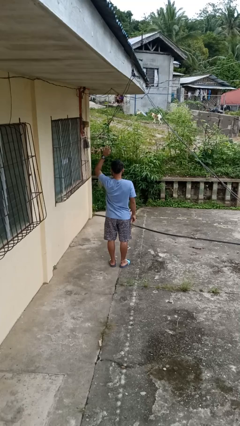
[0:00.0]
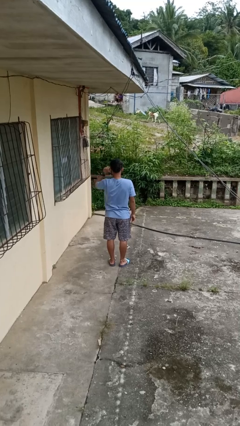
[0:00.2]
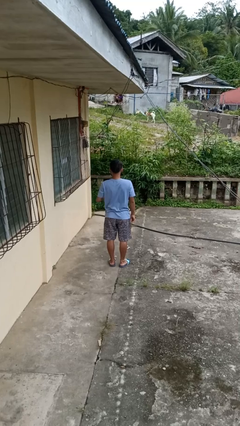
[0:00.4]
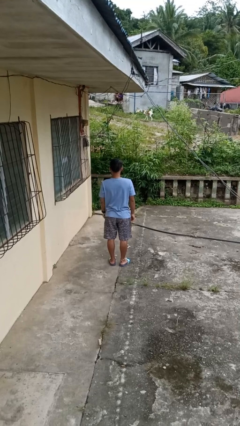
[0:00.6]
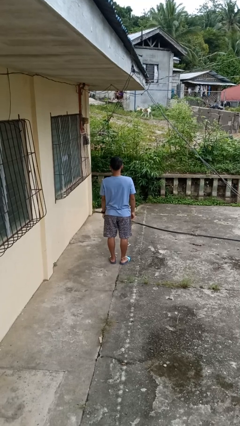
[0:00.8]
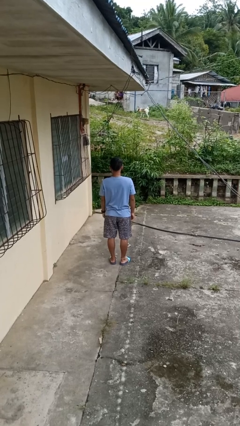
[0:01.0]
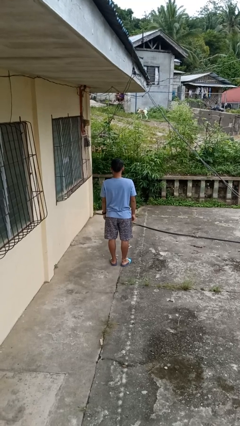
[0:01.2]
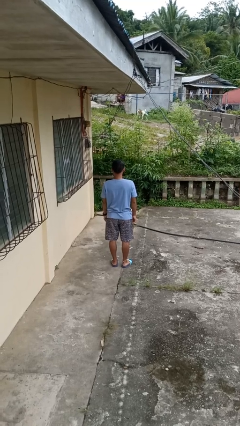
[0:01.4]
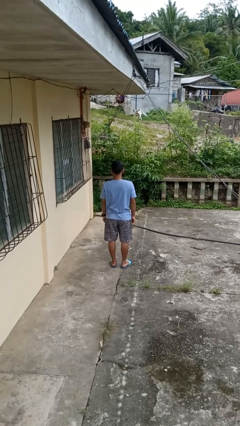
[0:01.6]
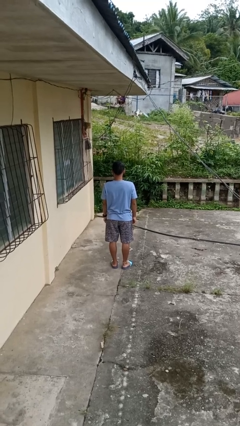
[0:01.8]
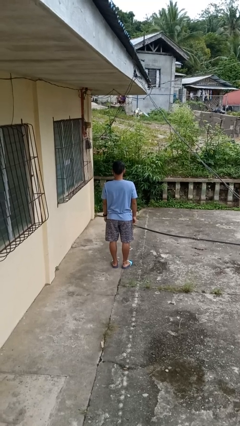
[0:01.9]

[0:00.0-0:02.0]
person gestures lower hand

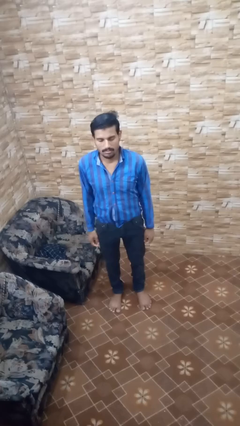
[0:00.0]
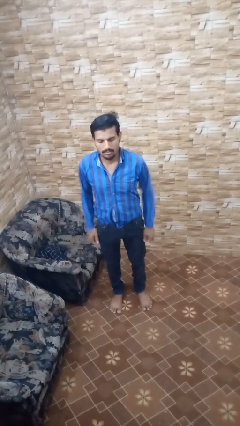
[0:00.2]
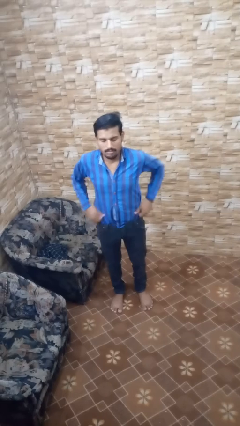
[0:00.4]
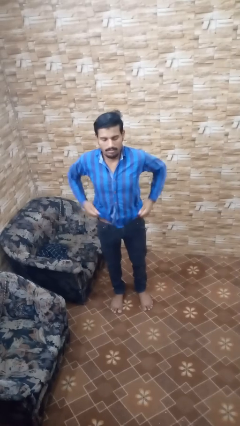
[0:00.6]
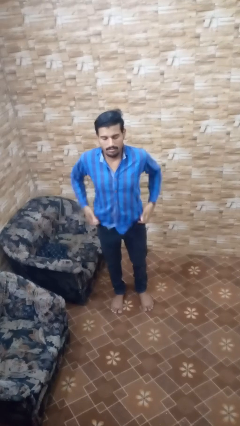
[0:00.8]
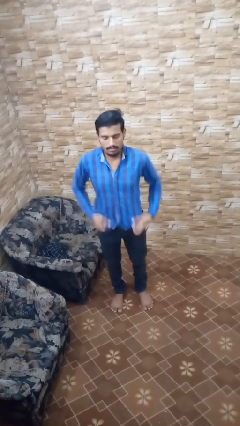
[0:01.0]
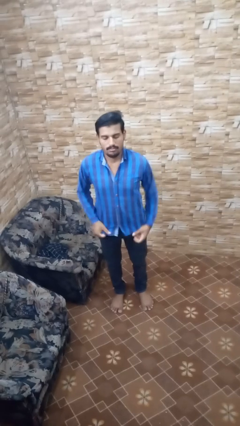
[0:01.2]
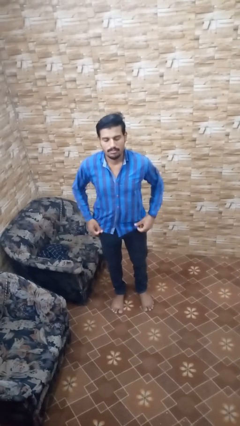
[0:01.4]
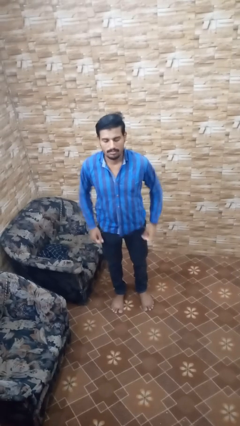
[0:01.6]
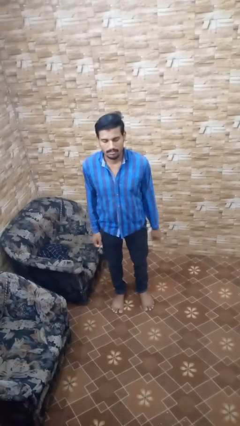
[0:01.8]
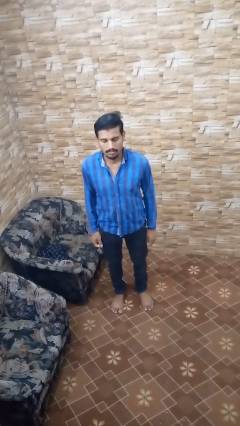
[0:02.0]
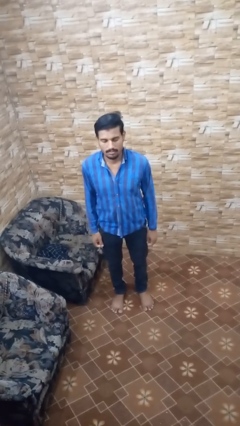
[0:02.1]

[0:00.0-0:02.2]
person untucks shirt

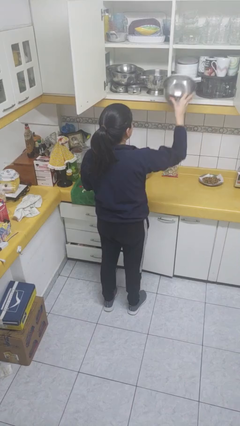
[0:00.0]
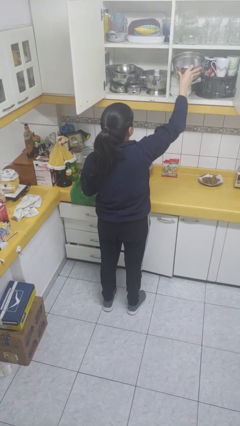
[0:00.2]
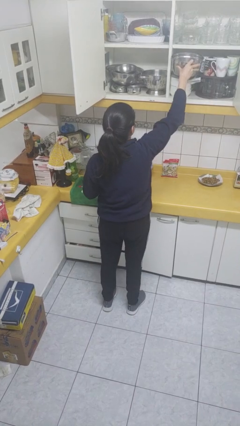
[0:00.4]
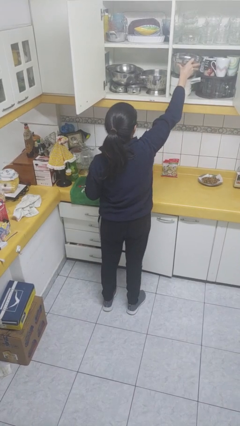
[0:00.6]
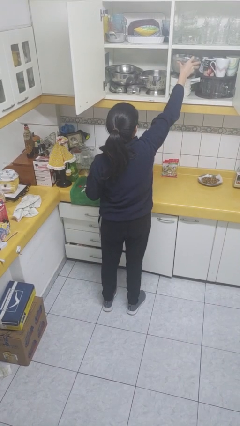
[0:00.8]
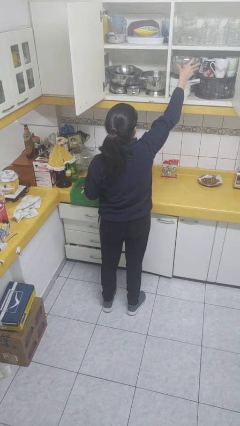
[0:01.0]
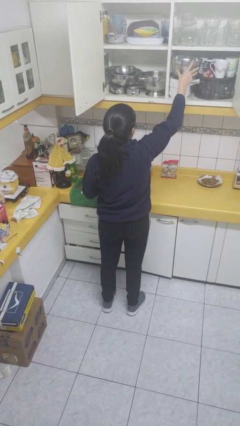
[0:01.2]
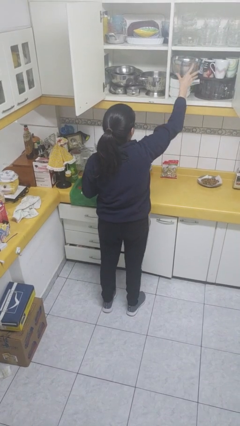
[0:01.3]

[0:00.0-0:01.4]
person puts down object into cabinet

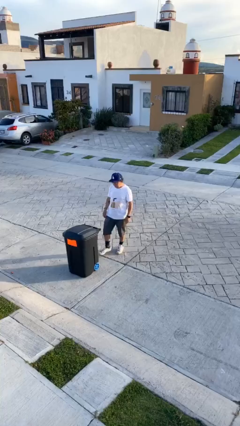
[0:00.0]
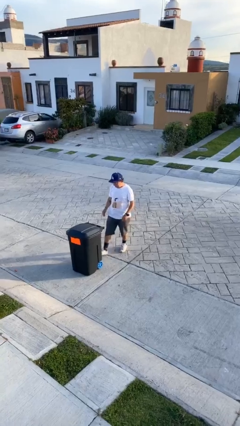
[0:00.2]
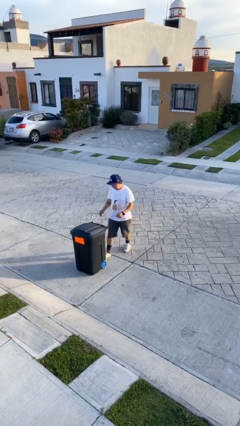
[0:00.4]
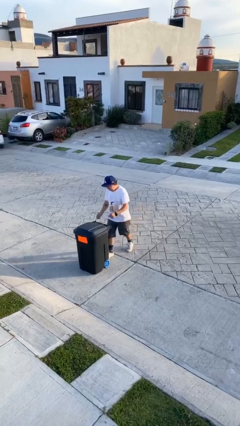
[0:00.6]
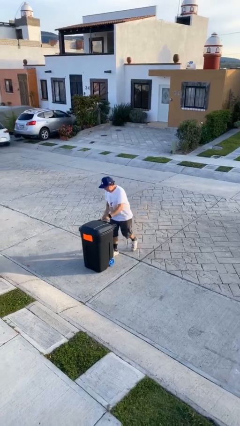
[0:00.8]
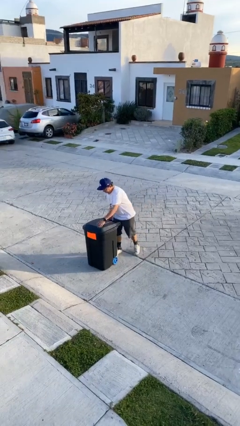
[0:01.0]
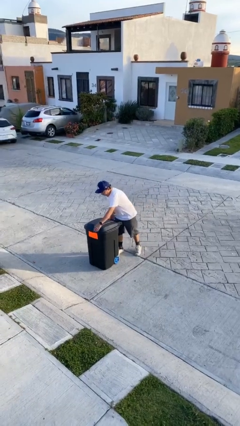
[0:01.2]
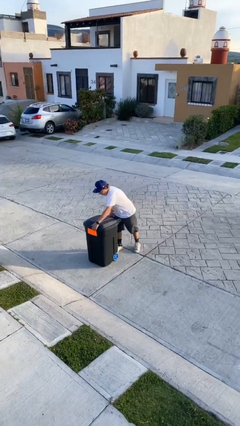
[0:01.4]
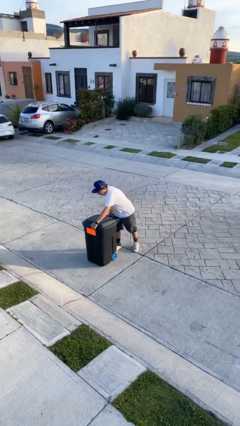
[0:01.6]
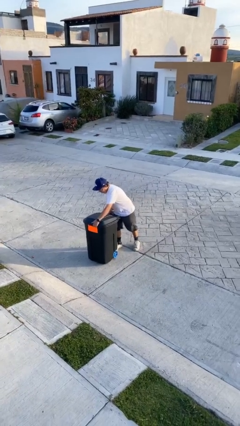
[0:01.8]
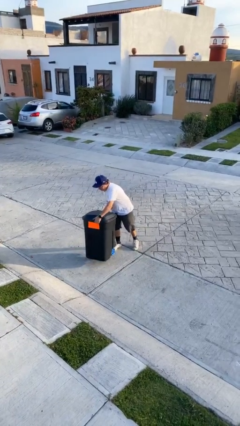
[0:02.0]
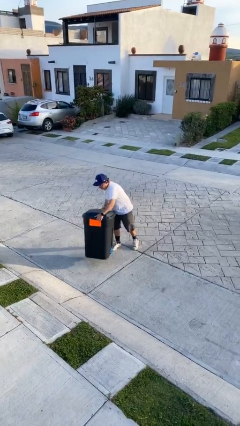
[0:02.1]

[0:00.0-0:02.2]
person picks up object from floor

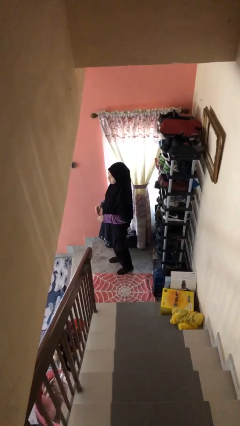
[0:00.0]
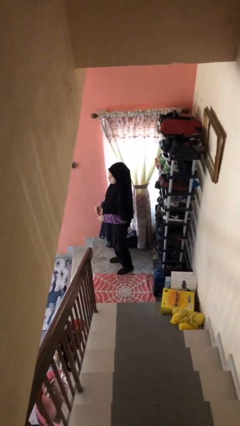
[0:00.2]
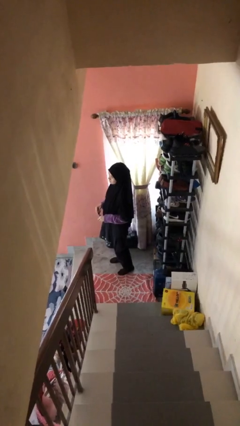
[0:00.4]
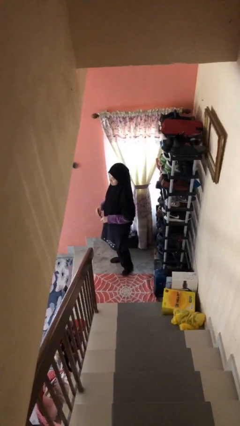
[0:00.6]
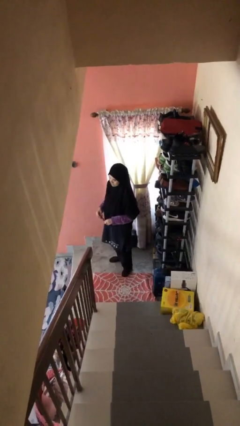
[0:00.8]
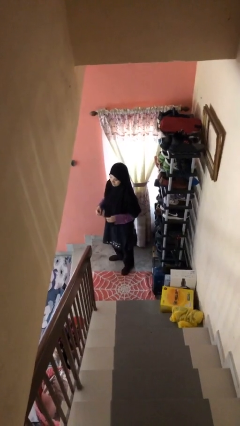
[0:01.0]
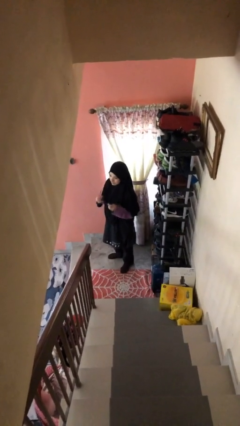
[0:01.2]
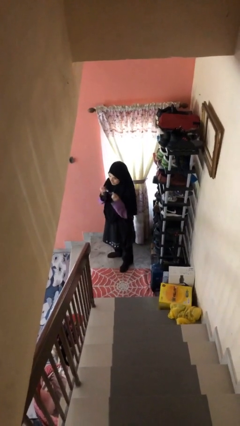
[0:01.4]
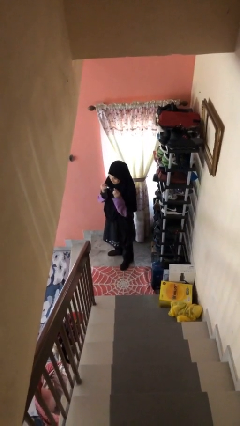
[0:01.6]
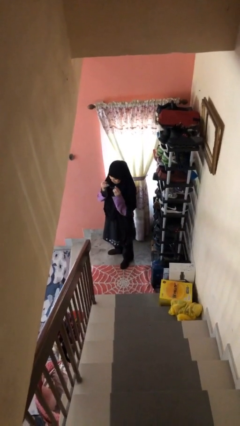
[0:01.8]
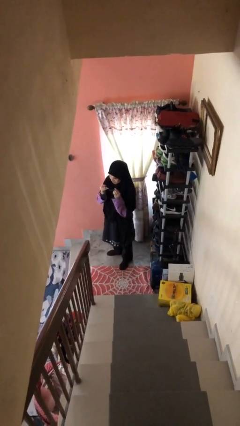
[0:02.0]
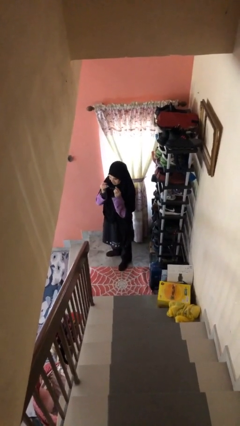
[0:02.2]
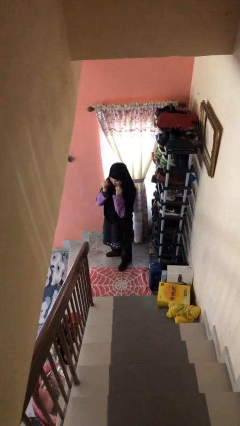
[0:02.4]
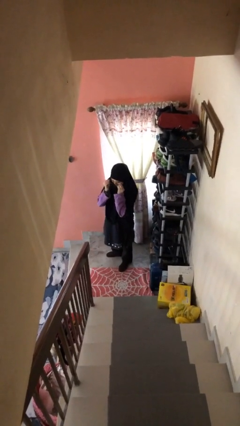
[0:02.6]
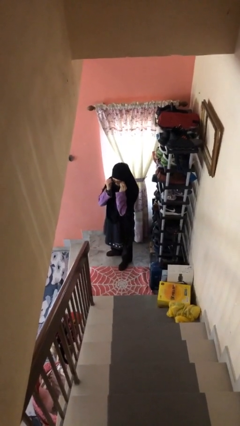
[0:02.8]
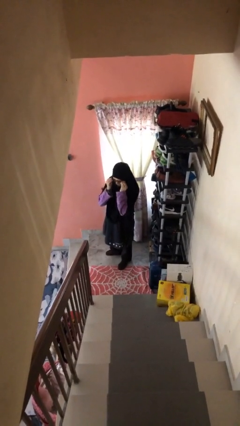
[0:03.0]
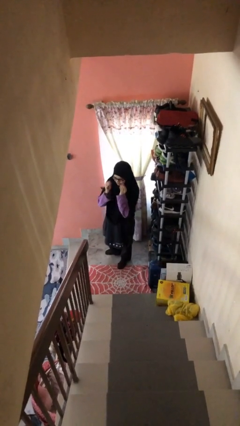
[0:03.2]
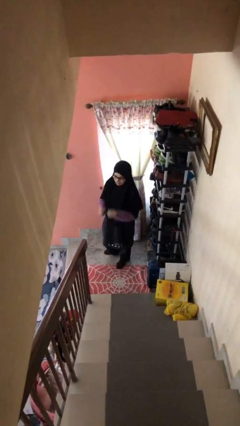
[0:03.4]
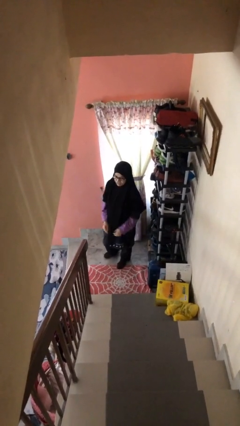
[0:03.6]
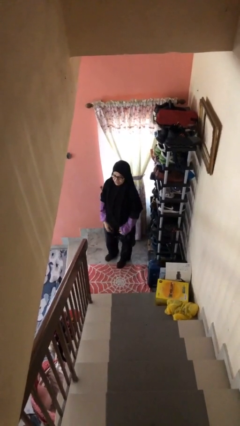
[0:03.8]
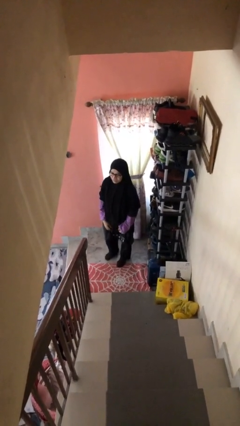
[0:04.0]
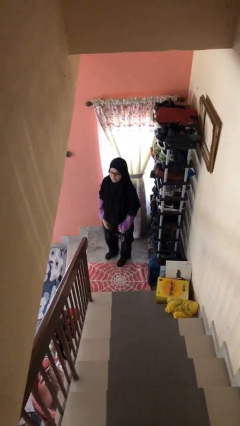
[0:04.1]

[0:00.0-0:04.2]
person puts on glasses

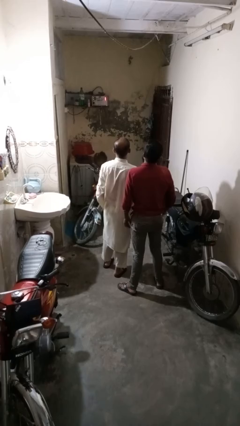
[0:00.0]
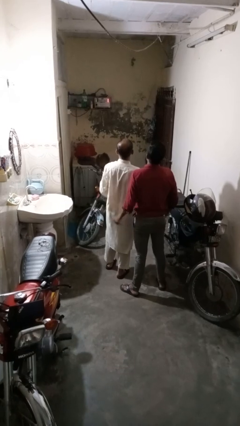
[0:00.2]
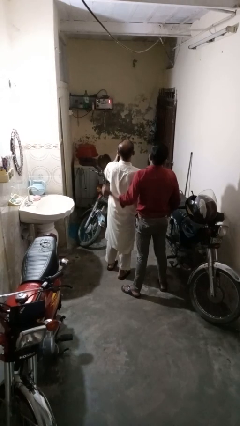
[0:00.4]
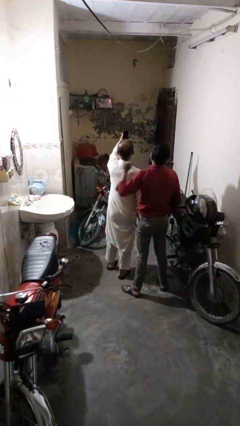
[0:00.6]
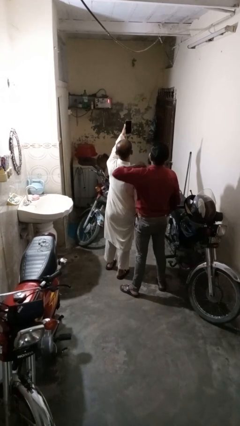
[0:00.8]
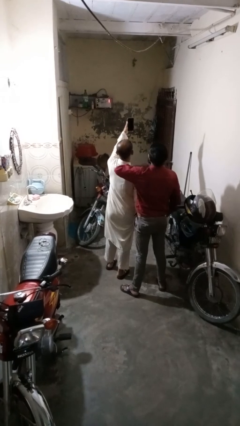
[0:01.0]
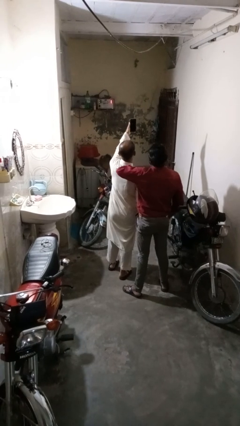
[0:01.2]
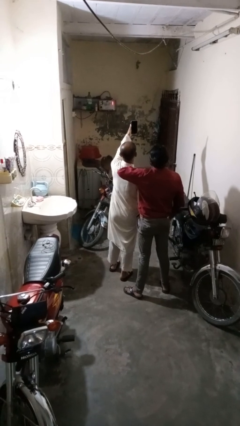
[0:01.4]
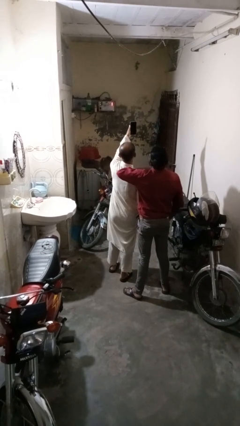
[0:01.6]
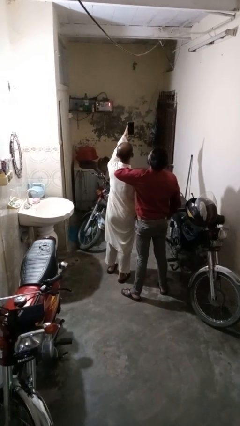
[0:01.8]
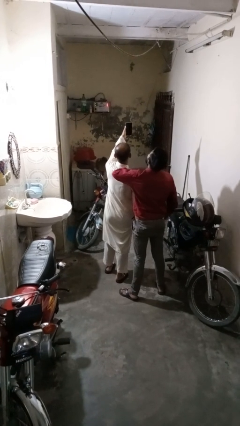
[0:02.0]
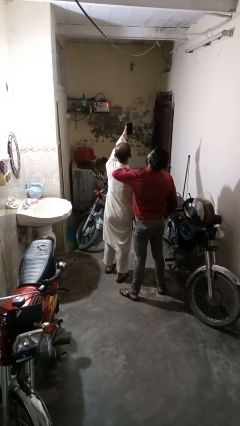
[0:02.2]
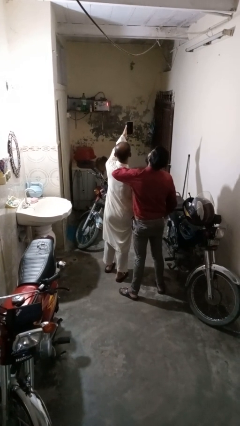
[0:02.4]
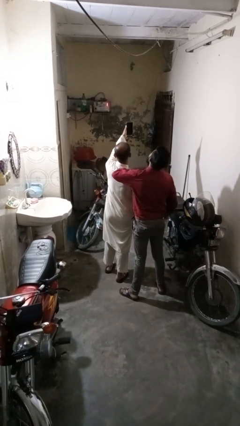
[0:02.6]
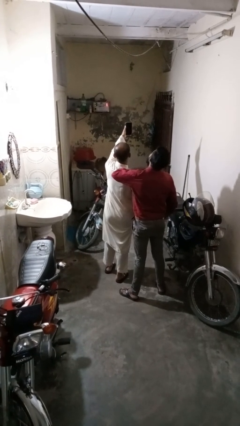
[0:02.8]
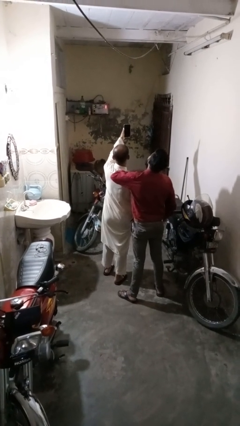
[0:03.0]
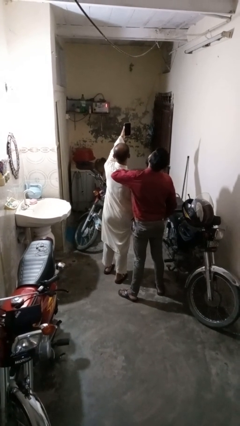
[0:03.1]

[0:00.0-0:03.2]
person takes selfie with person

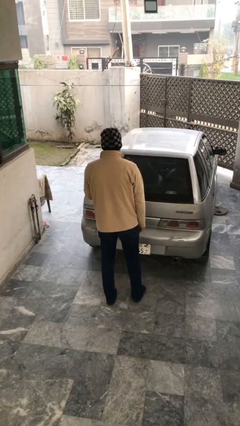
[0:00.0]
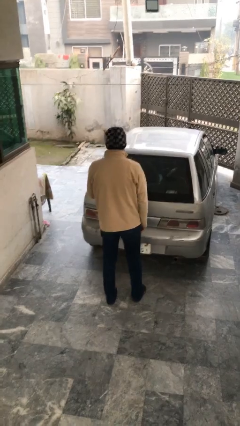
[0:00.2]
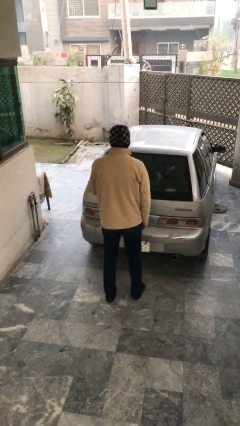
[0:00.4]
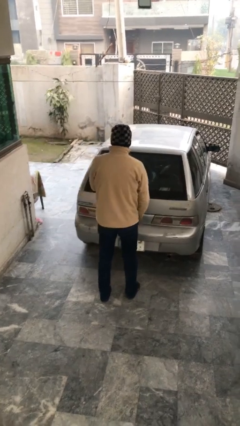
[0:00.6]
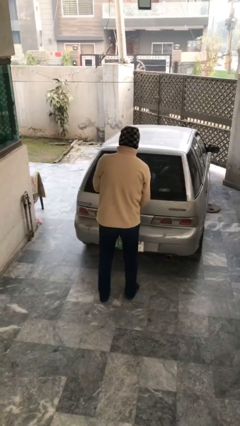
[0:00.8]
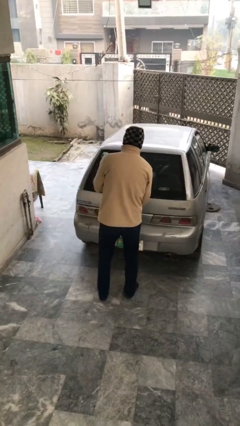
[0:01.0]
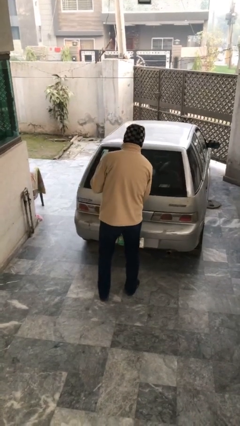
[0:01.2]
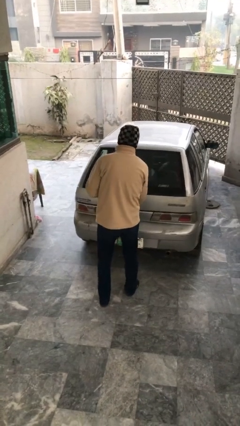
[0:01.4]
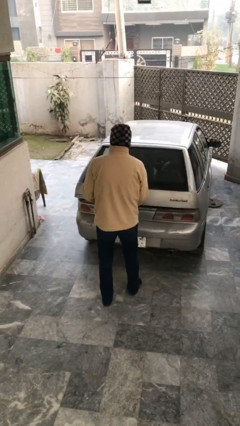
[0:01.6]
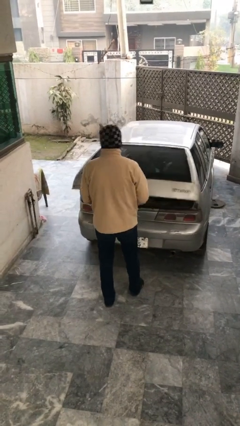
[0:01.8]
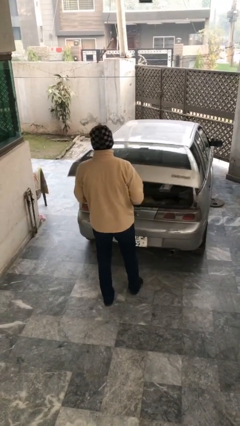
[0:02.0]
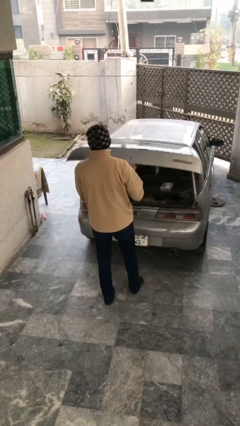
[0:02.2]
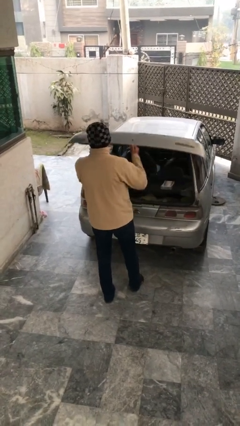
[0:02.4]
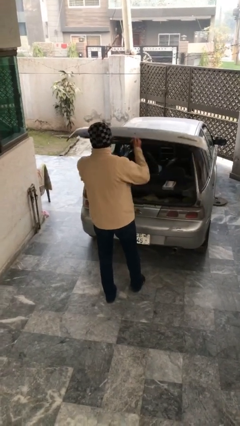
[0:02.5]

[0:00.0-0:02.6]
person opens car trunk
